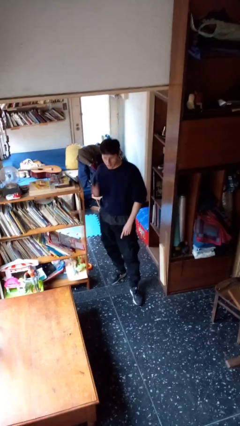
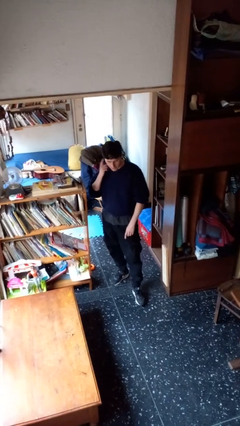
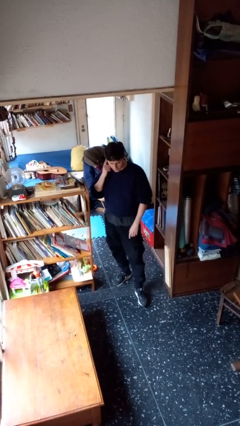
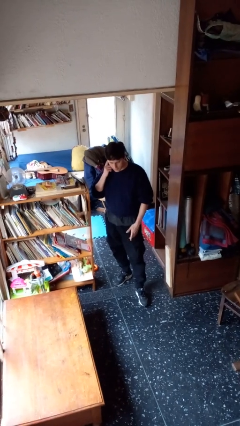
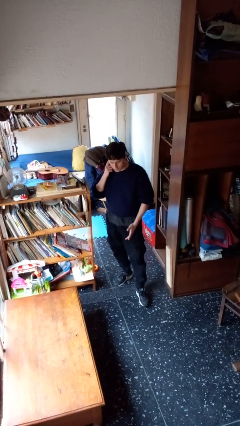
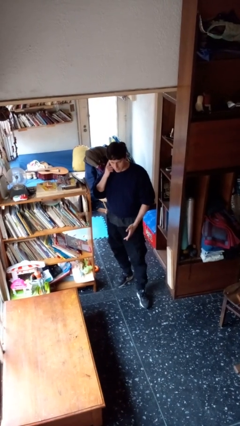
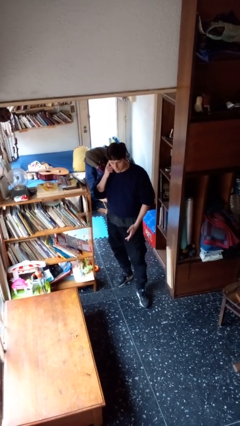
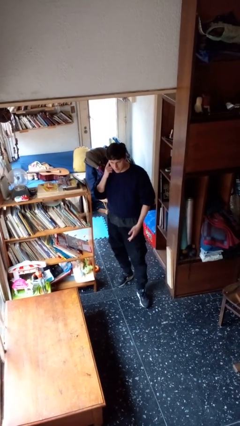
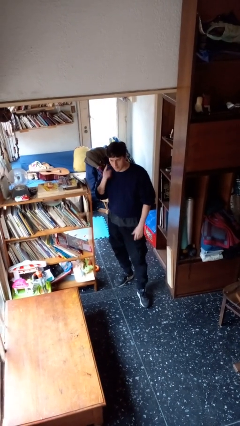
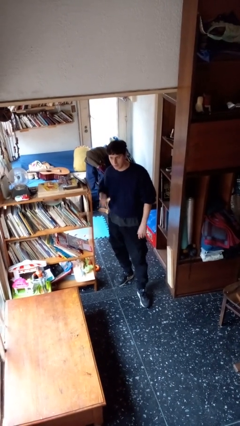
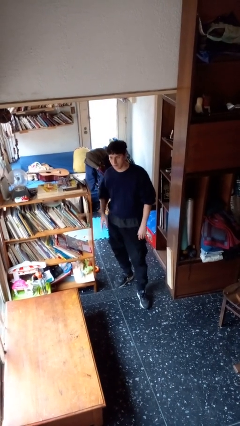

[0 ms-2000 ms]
person gestures listen closely

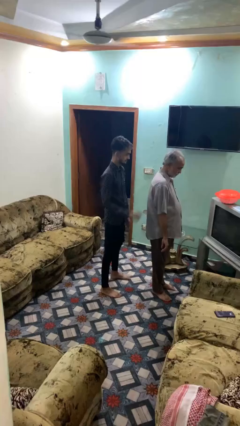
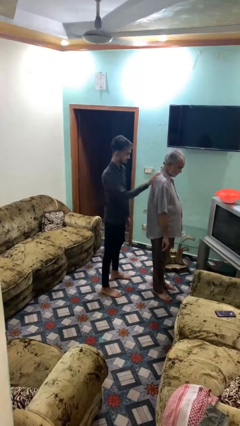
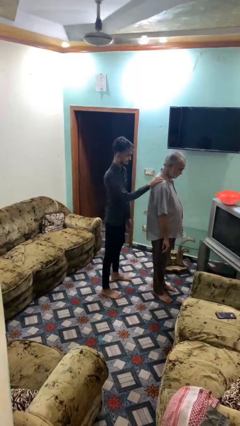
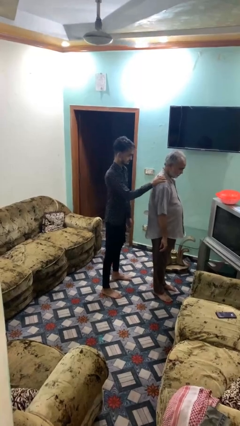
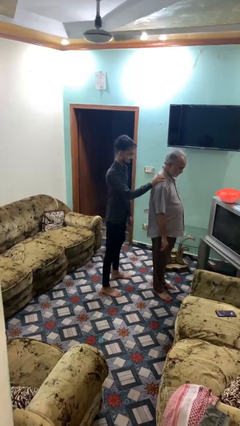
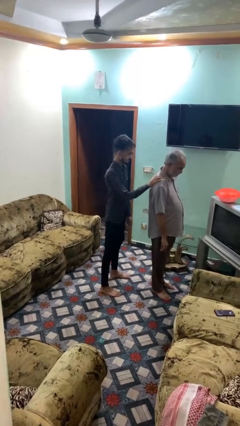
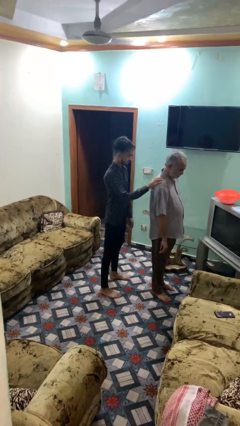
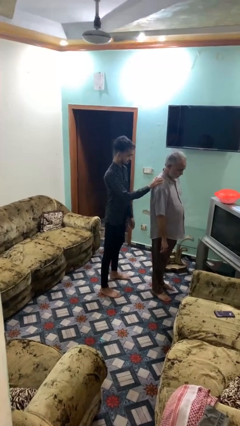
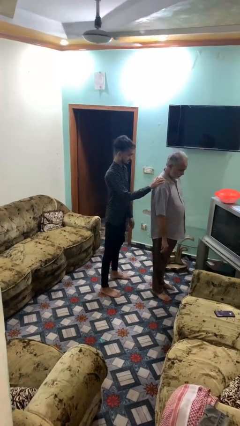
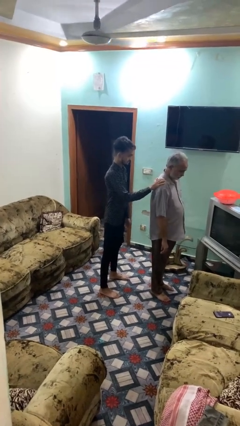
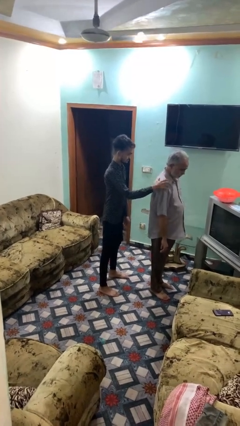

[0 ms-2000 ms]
person grabs person by shoulder

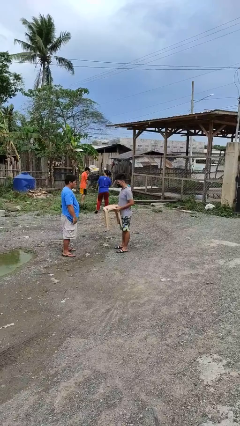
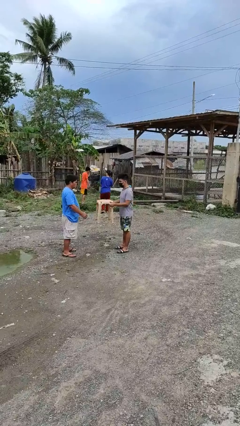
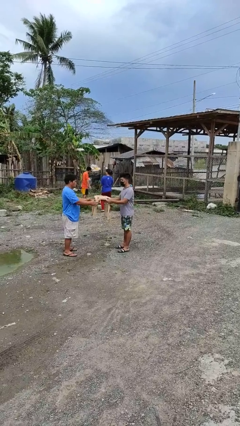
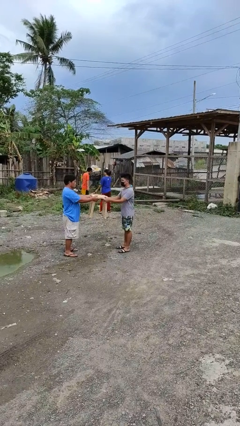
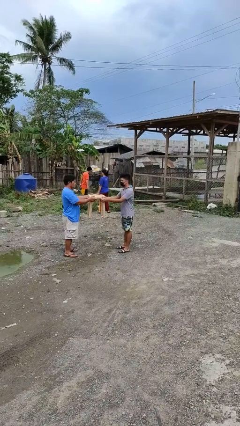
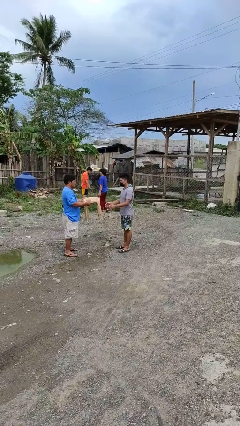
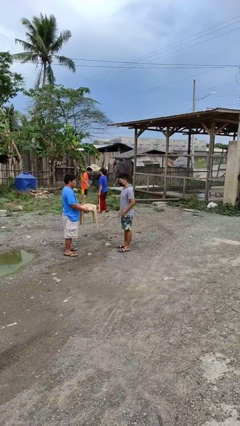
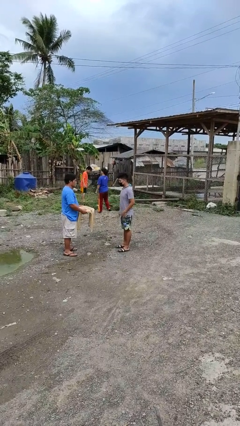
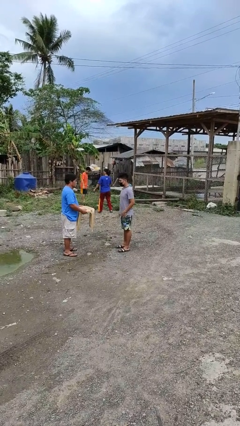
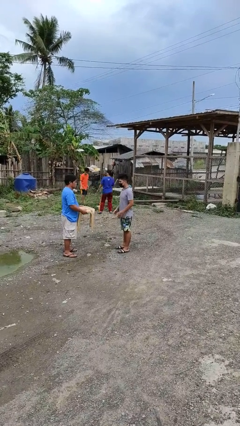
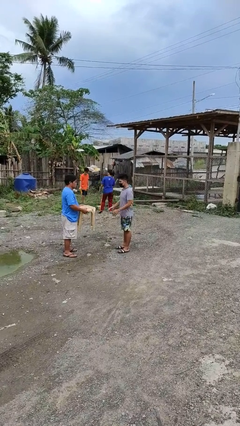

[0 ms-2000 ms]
person transfers object to person

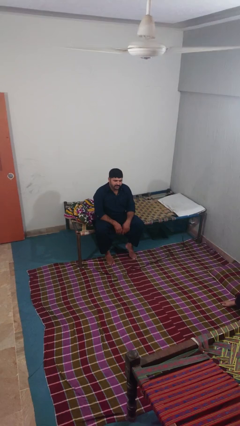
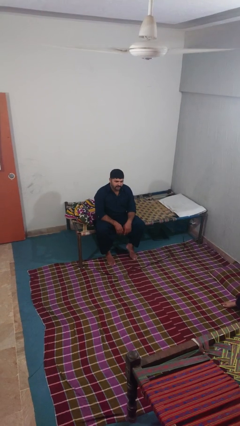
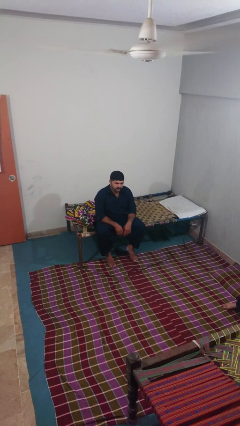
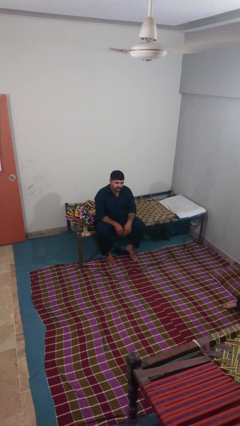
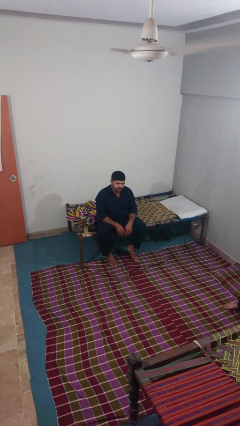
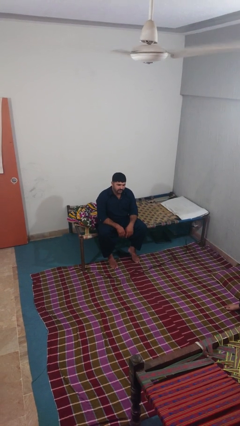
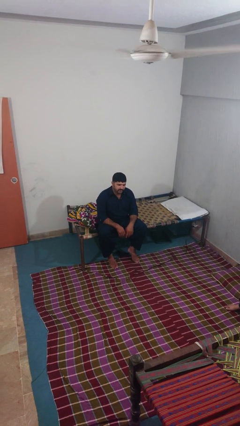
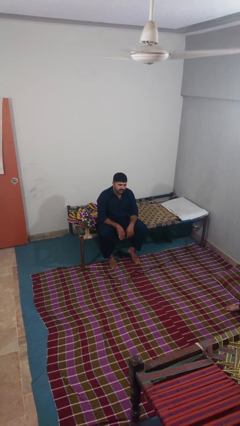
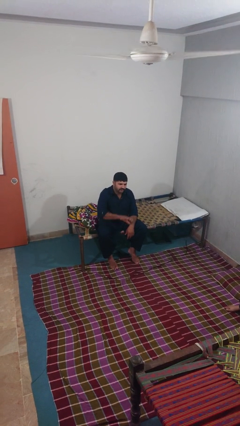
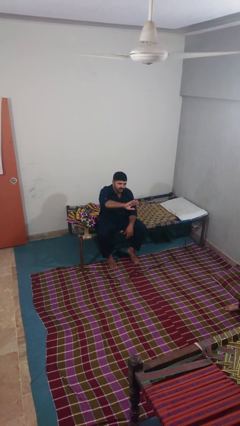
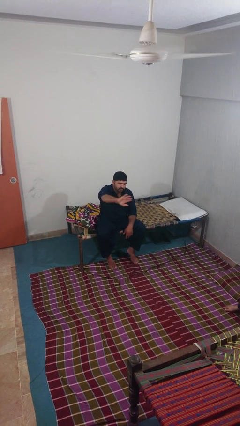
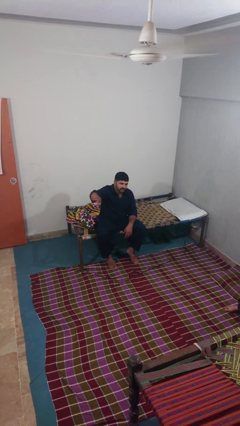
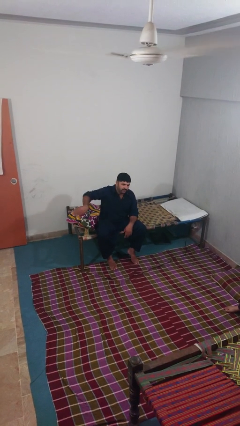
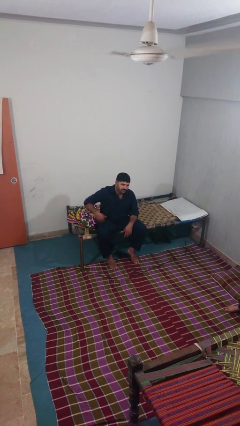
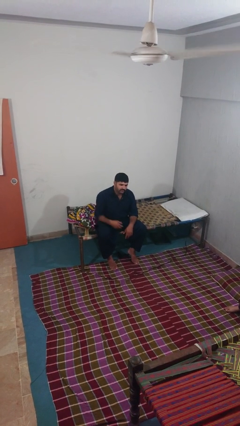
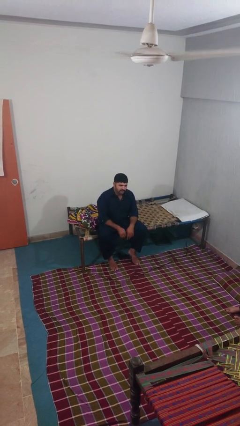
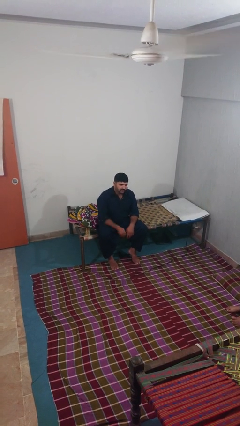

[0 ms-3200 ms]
person gestures swipe right

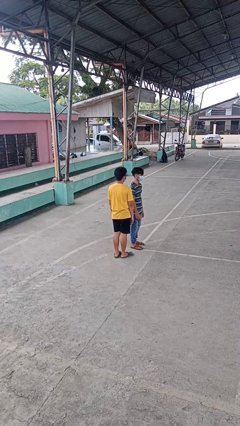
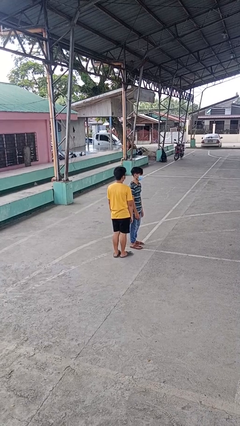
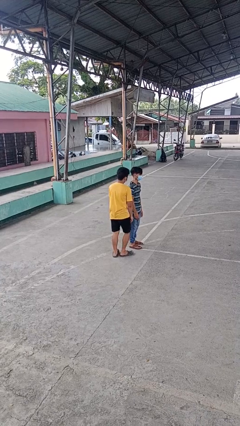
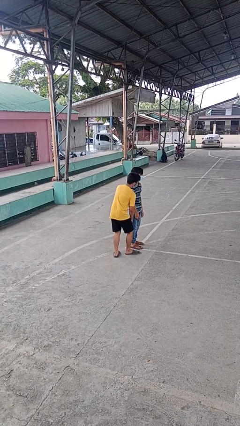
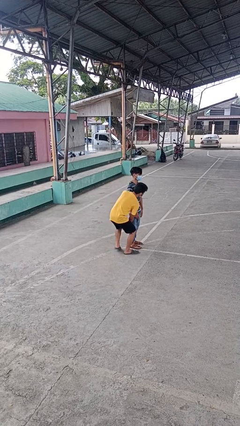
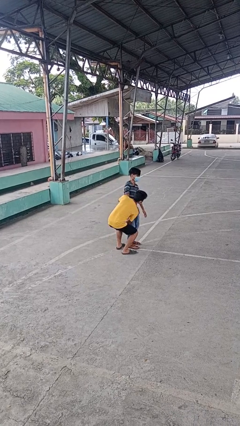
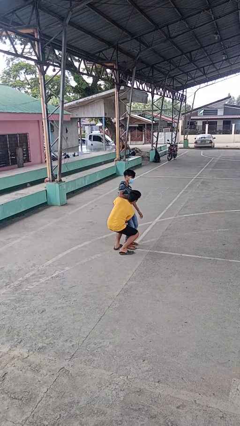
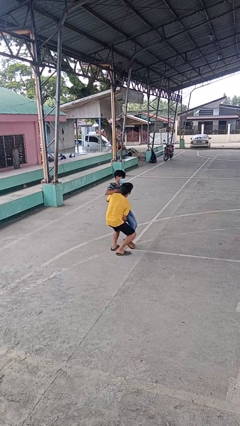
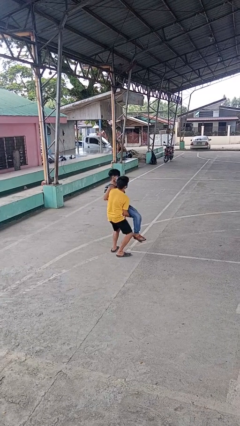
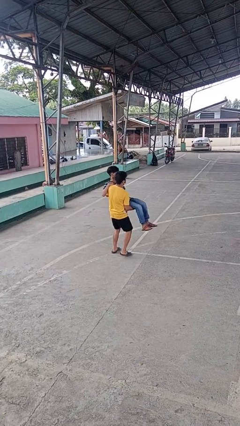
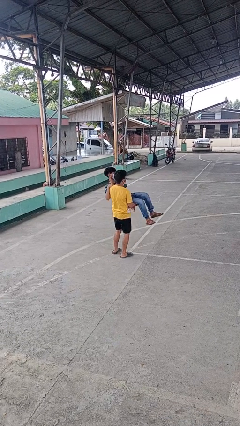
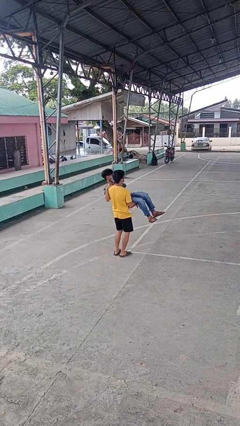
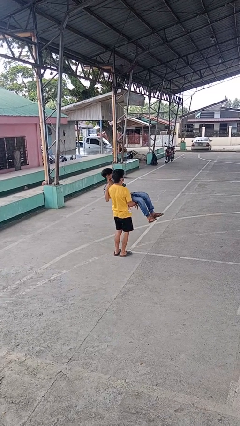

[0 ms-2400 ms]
person picks up person

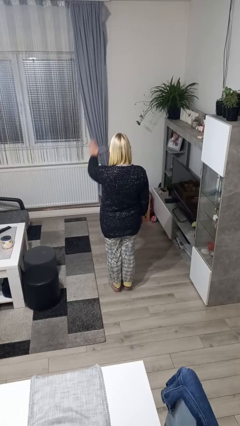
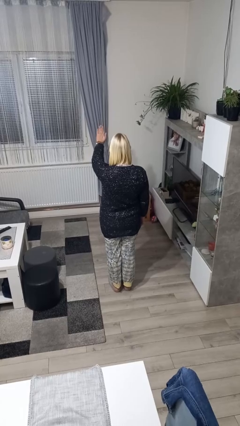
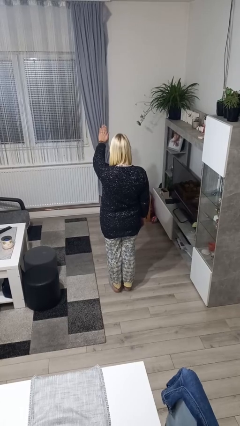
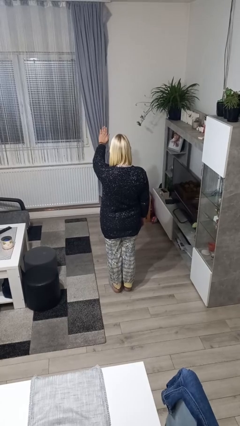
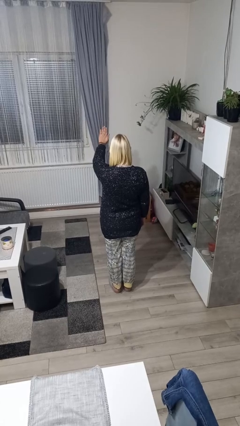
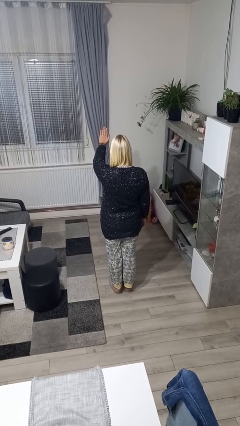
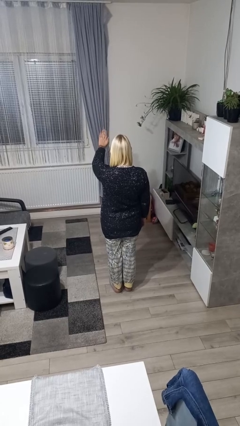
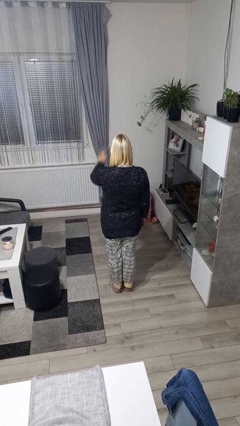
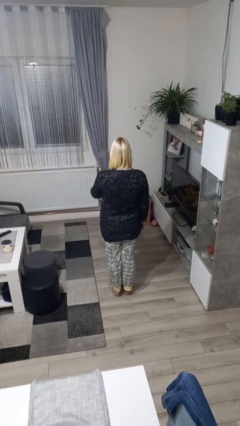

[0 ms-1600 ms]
person gestures stop

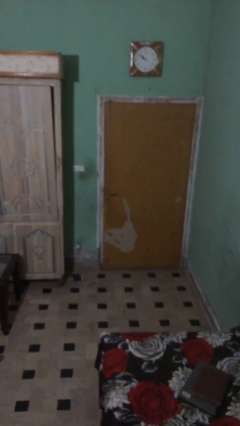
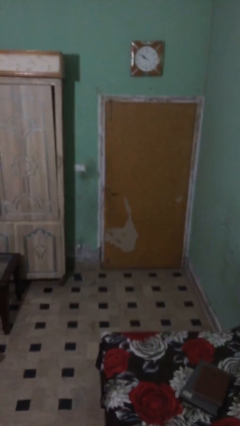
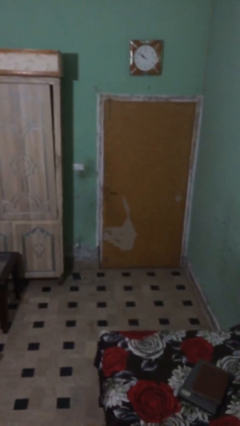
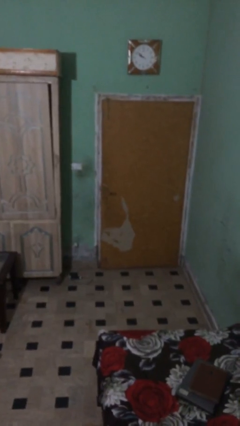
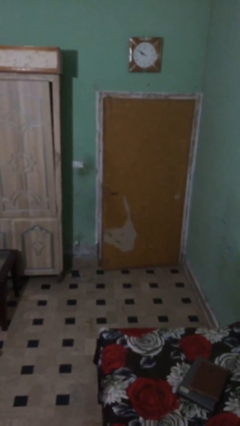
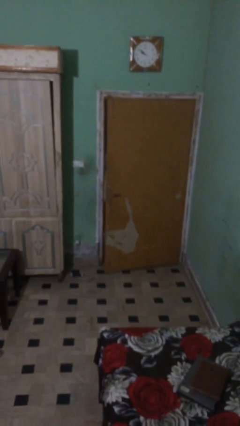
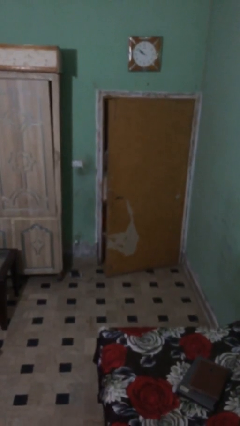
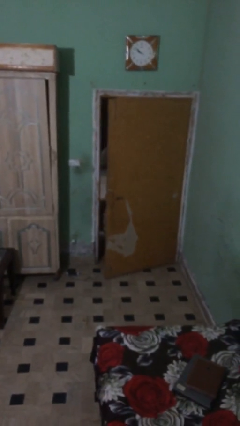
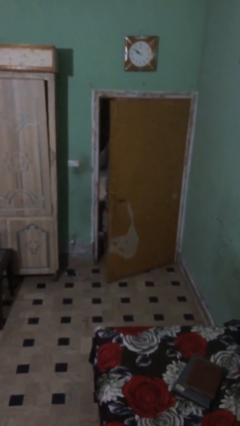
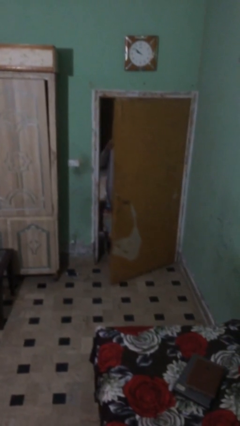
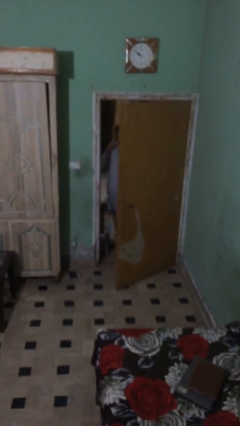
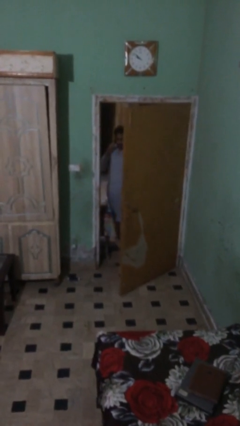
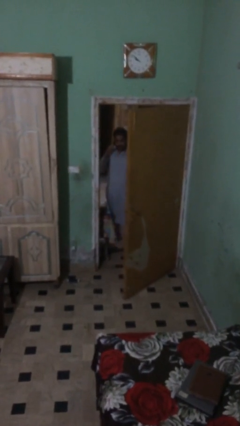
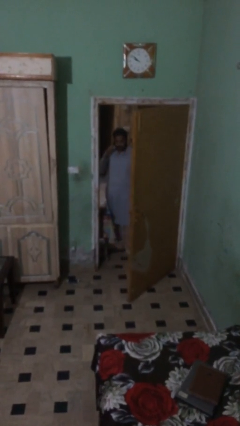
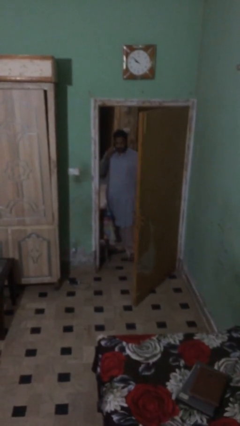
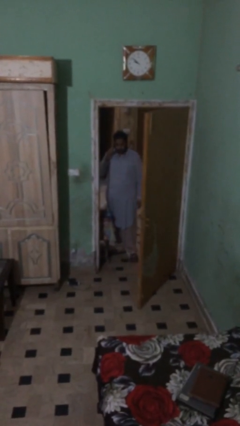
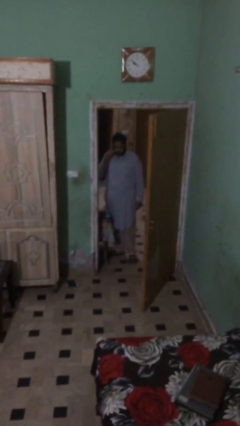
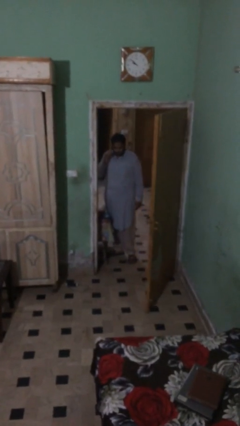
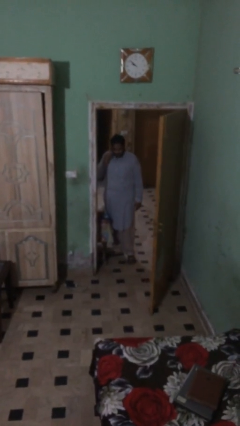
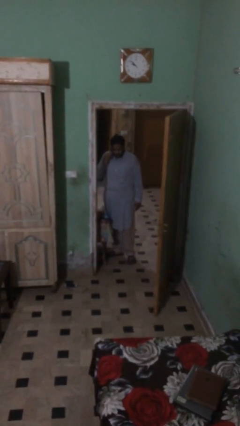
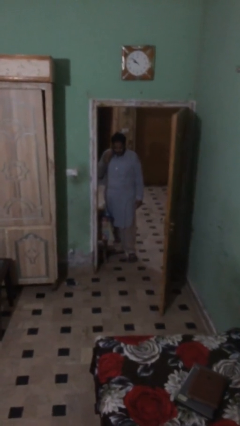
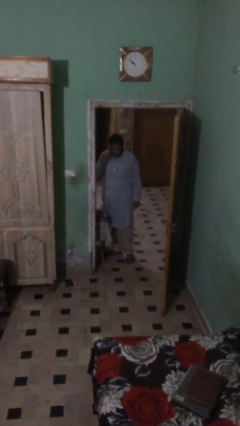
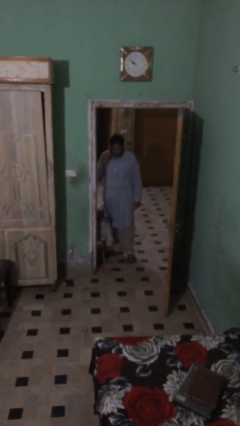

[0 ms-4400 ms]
person opens facility door
